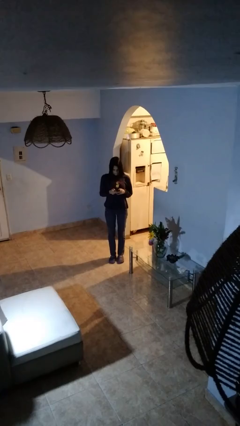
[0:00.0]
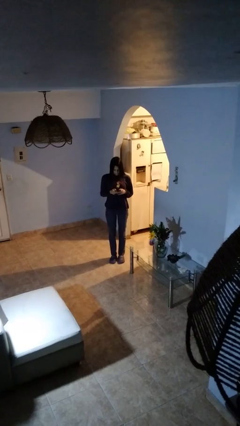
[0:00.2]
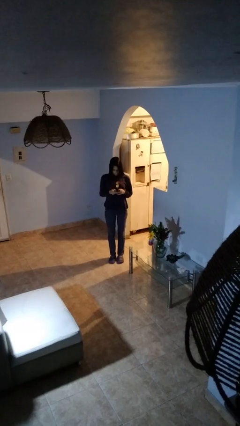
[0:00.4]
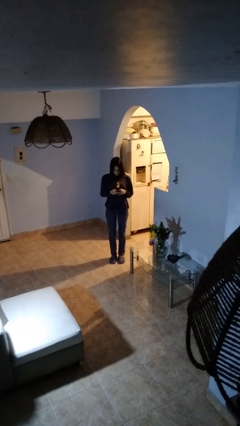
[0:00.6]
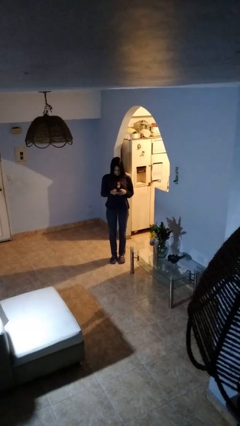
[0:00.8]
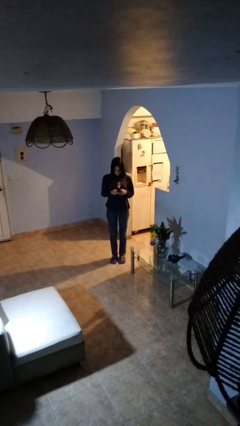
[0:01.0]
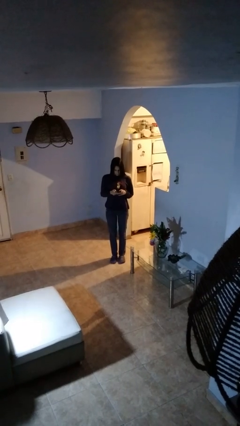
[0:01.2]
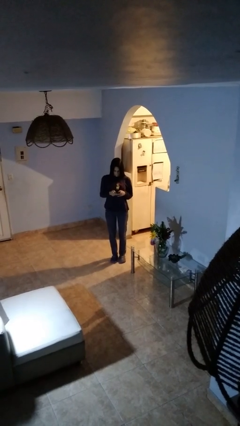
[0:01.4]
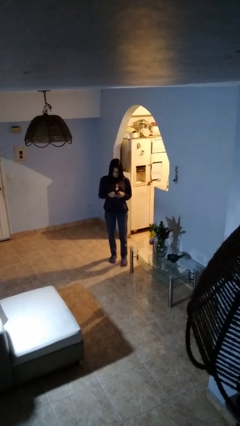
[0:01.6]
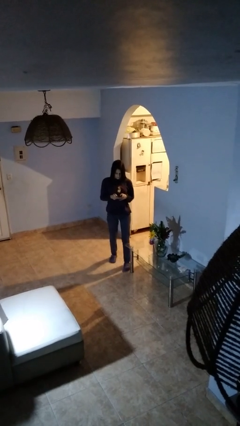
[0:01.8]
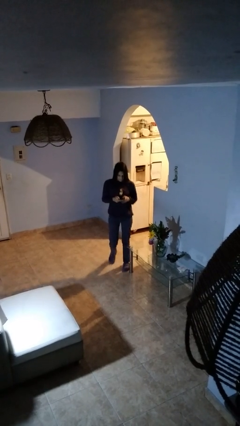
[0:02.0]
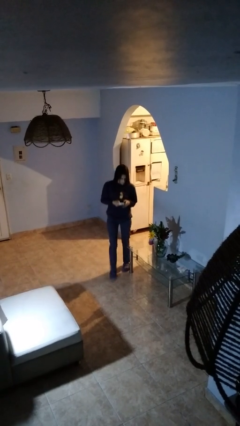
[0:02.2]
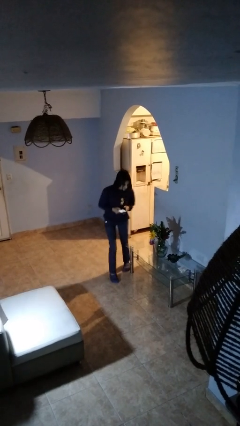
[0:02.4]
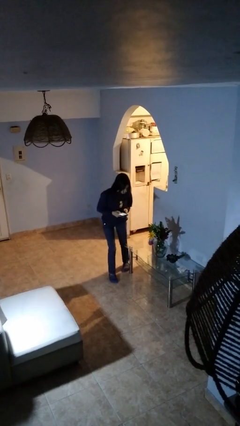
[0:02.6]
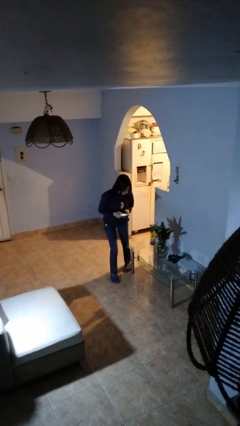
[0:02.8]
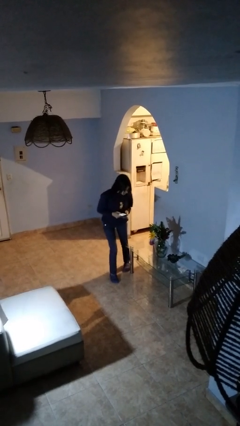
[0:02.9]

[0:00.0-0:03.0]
person bumps into table

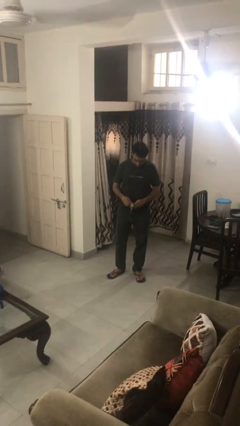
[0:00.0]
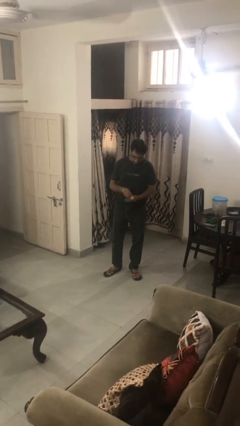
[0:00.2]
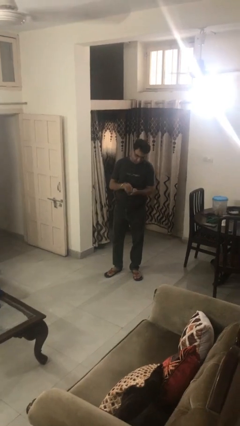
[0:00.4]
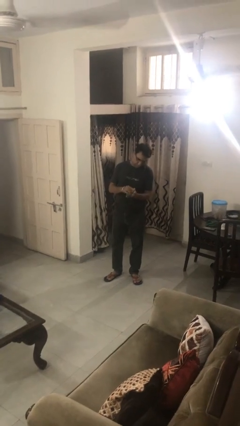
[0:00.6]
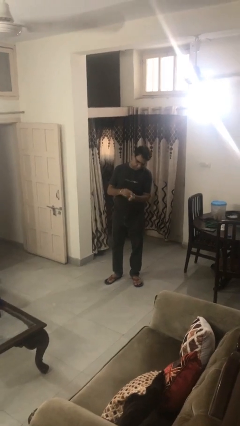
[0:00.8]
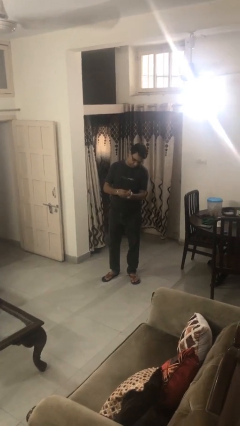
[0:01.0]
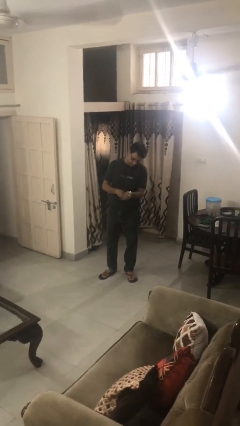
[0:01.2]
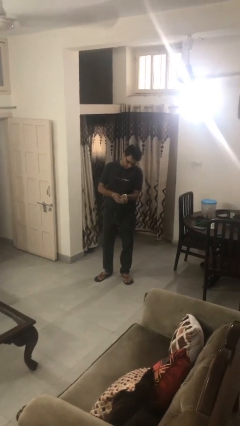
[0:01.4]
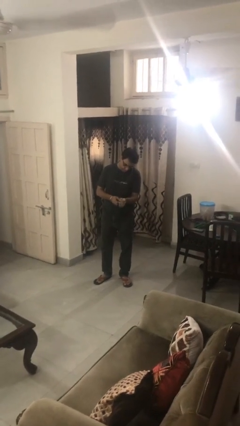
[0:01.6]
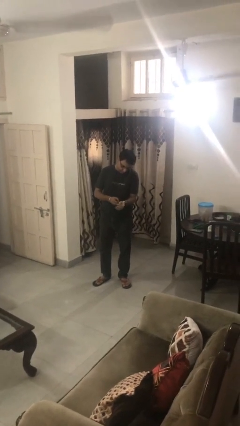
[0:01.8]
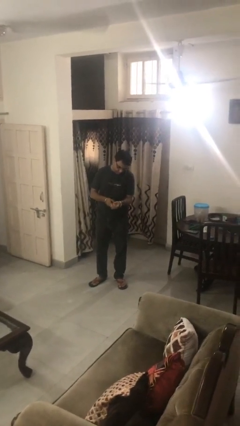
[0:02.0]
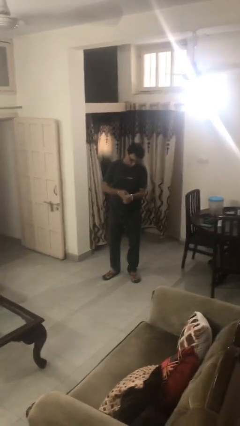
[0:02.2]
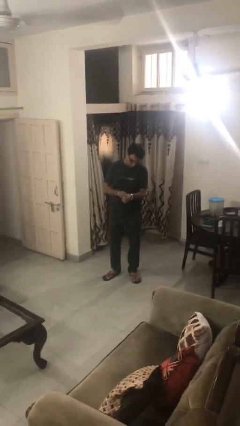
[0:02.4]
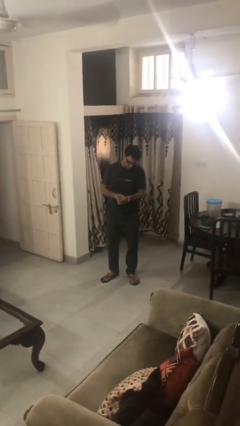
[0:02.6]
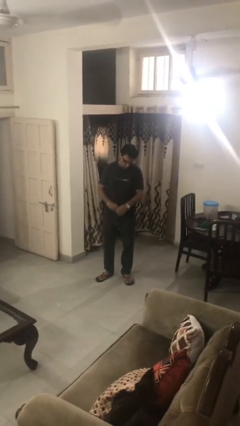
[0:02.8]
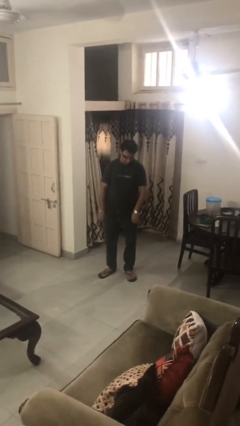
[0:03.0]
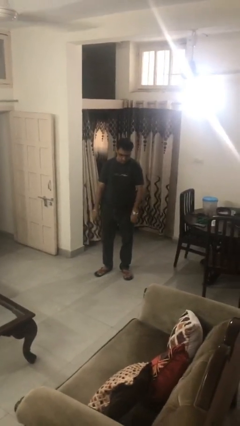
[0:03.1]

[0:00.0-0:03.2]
person puts on wristwatch

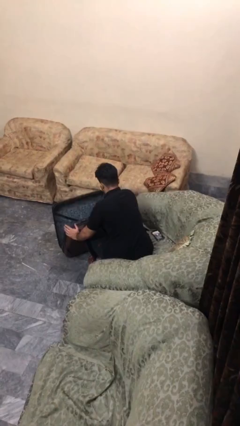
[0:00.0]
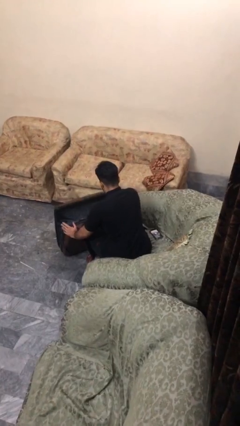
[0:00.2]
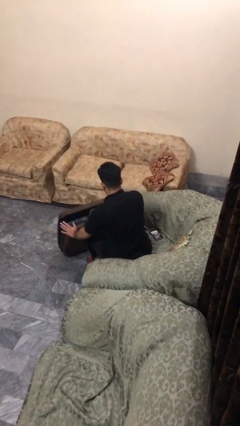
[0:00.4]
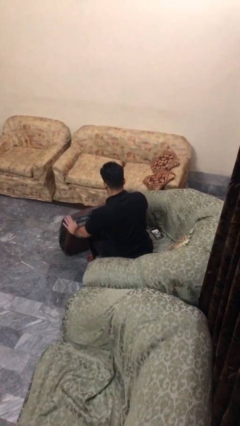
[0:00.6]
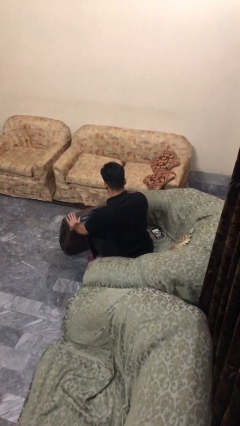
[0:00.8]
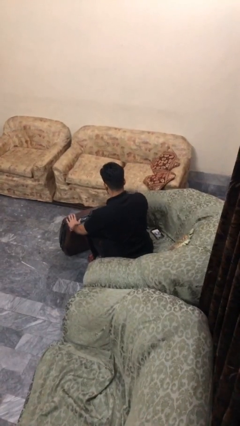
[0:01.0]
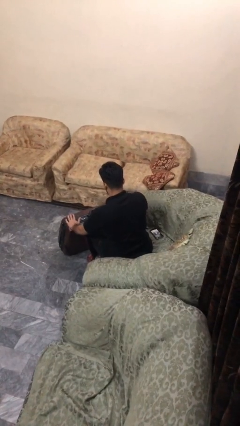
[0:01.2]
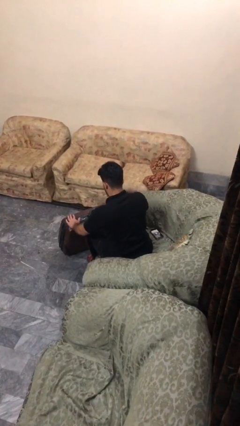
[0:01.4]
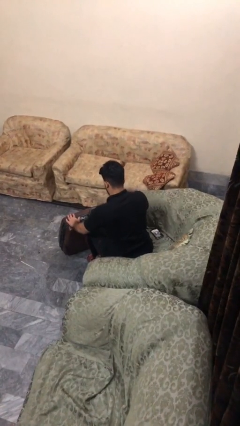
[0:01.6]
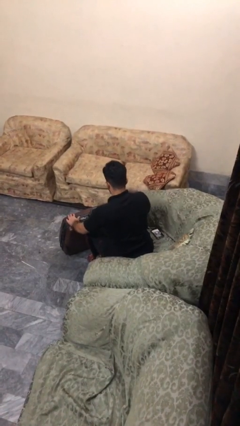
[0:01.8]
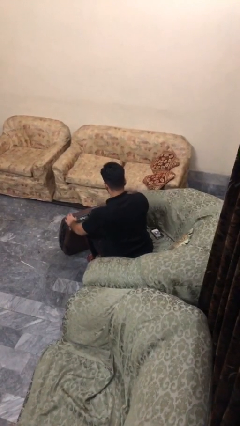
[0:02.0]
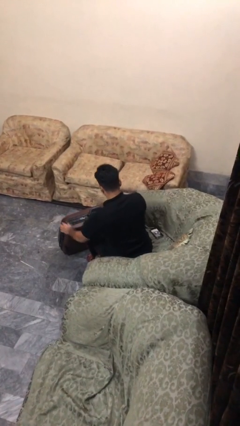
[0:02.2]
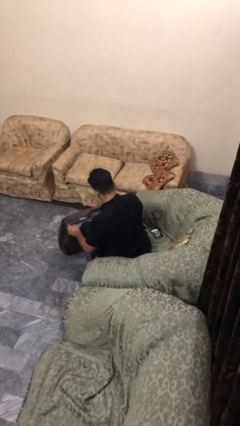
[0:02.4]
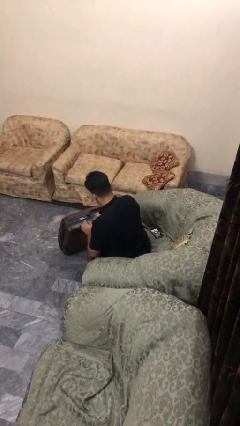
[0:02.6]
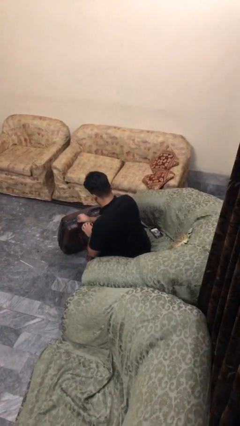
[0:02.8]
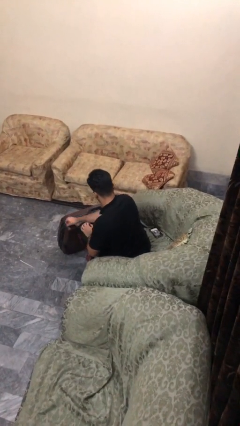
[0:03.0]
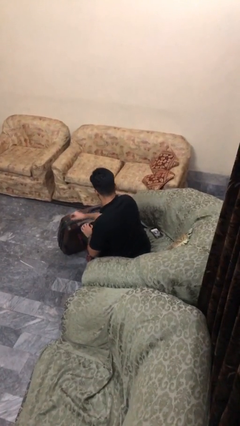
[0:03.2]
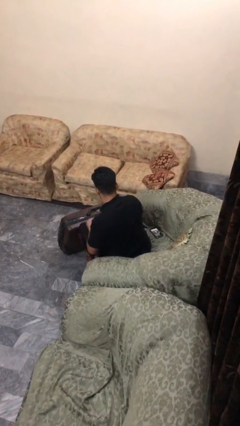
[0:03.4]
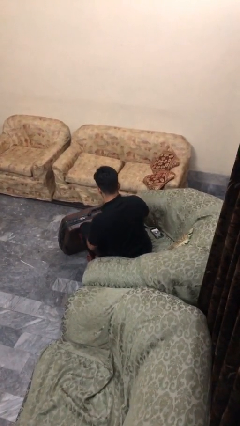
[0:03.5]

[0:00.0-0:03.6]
person closes suitcase

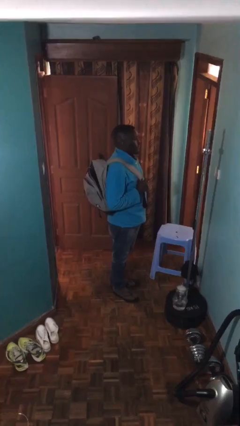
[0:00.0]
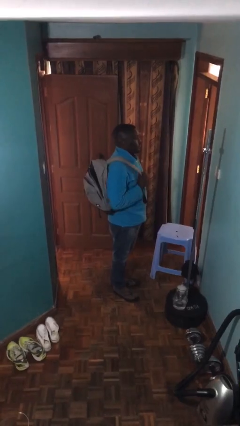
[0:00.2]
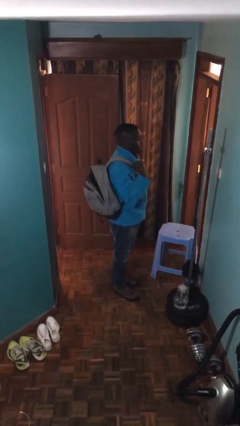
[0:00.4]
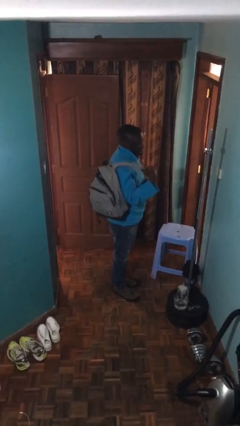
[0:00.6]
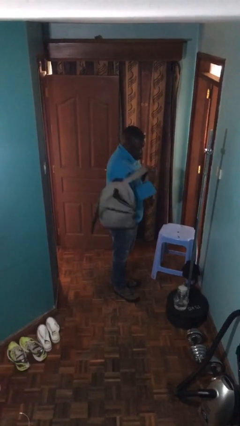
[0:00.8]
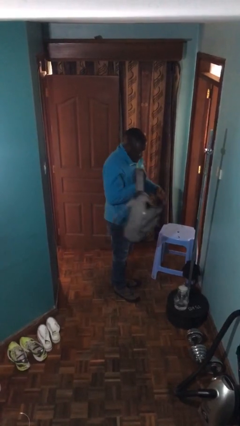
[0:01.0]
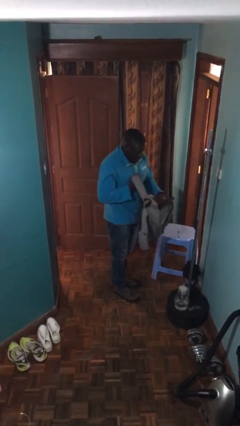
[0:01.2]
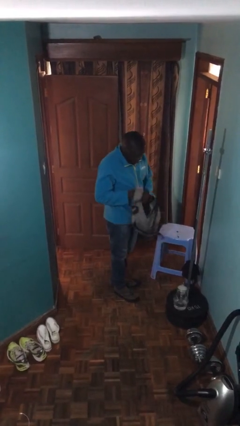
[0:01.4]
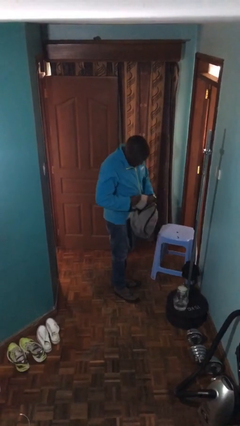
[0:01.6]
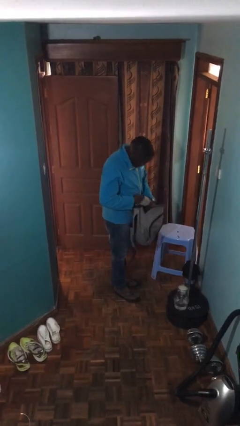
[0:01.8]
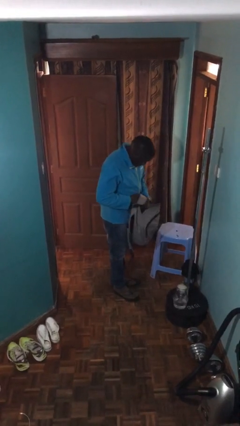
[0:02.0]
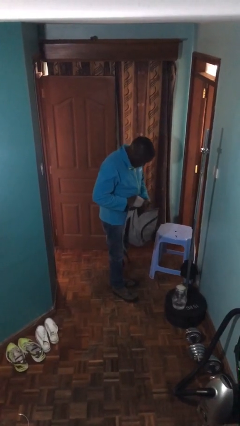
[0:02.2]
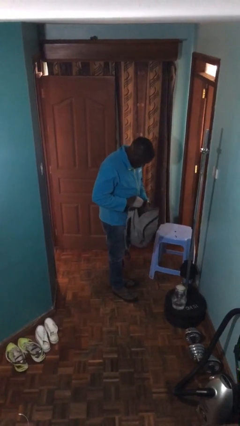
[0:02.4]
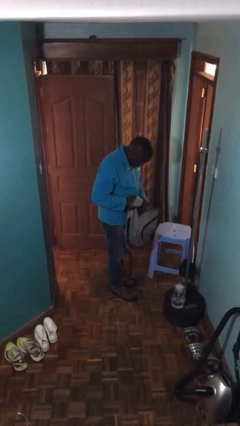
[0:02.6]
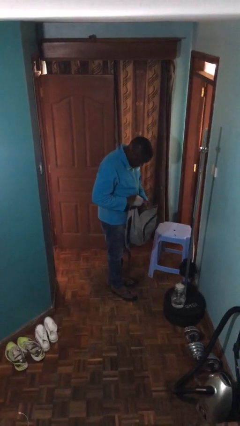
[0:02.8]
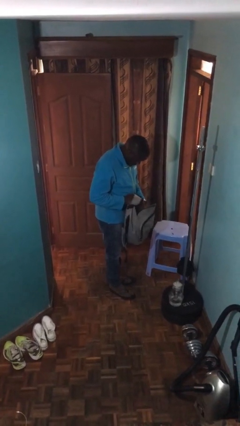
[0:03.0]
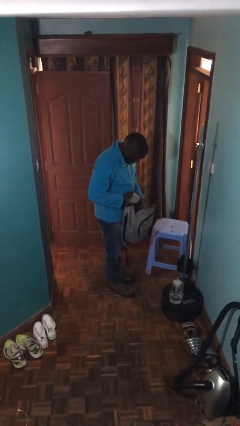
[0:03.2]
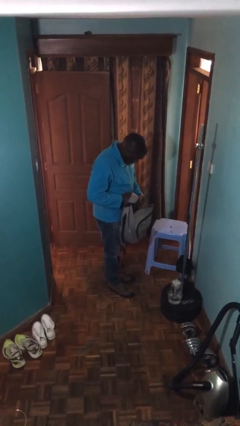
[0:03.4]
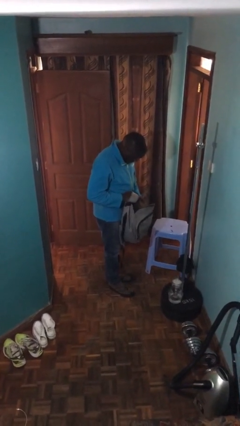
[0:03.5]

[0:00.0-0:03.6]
person searches in backpack

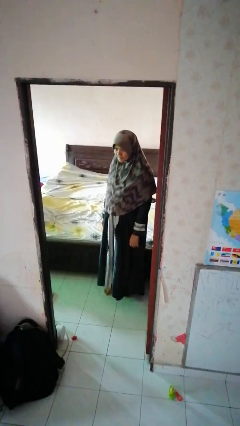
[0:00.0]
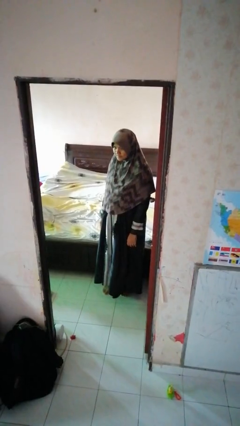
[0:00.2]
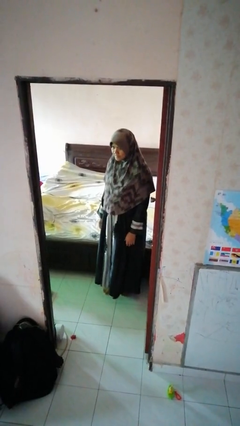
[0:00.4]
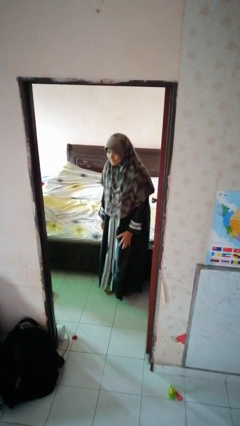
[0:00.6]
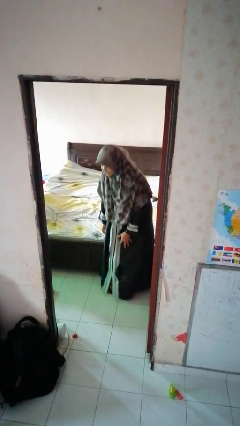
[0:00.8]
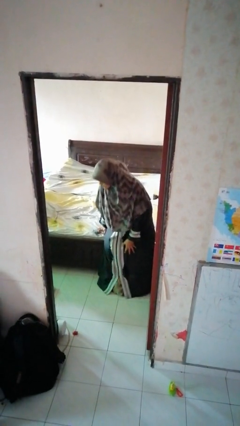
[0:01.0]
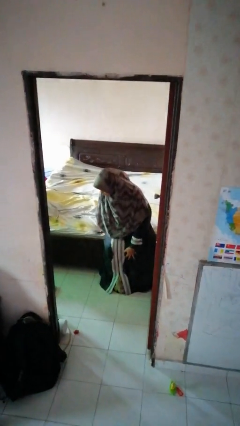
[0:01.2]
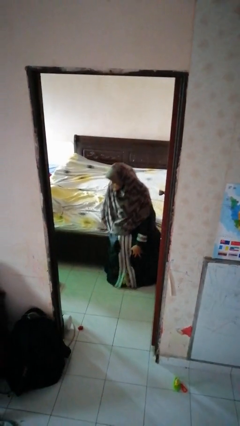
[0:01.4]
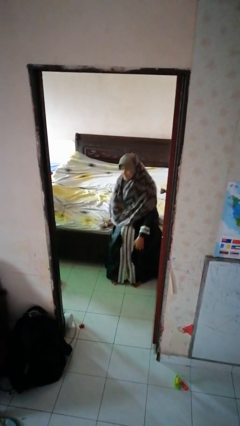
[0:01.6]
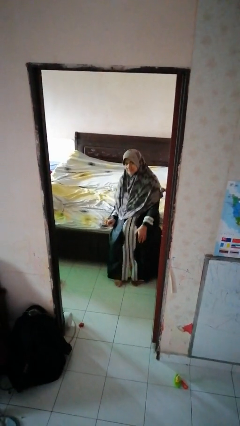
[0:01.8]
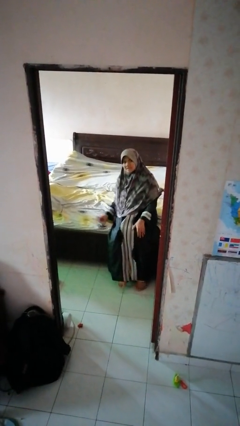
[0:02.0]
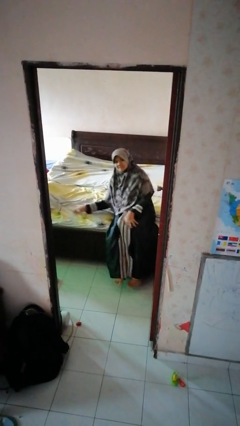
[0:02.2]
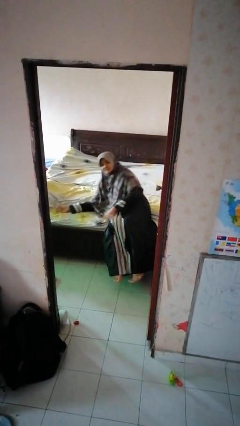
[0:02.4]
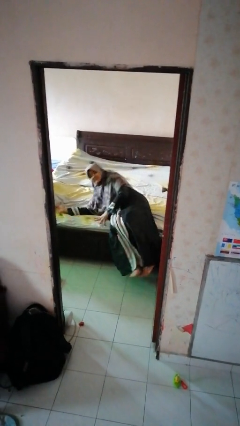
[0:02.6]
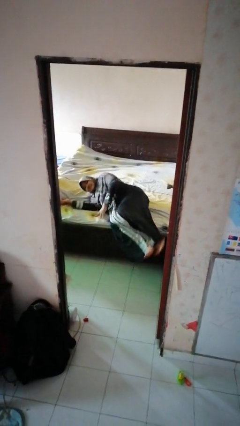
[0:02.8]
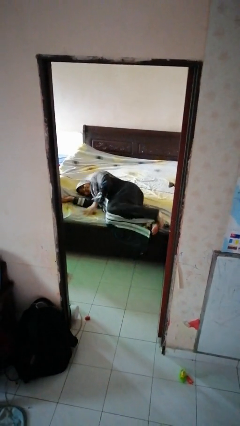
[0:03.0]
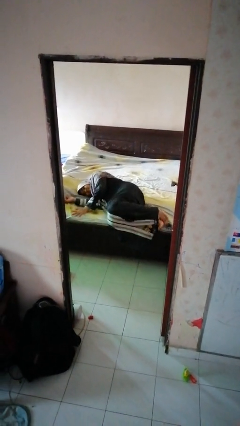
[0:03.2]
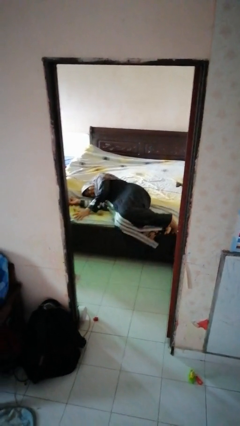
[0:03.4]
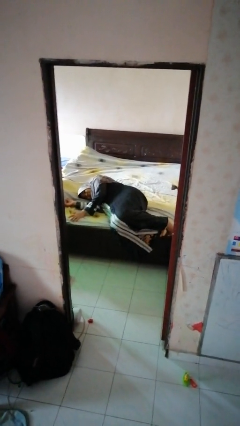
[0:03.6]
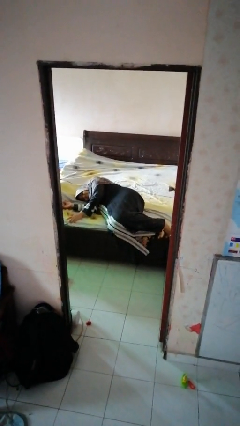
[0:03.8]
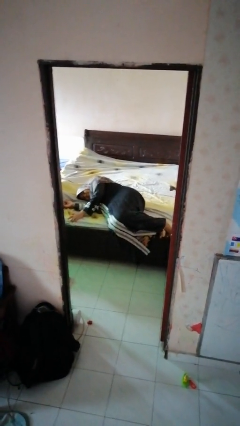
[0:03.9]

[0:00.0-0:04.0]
person lies down on bed
